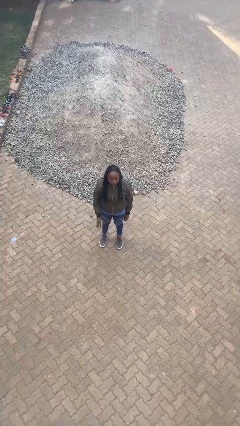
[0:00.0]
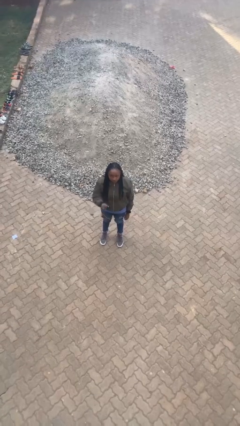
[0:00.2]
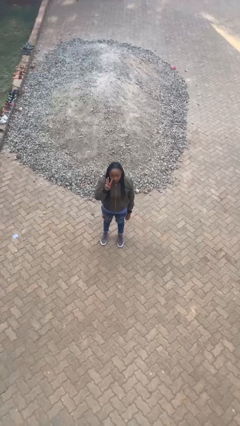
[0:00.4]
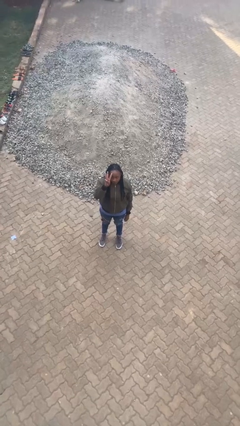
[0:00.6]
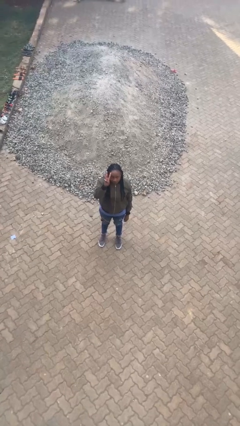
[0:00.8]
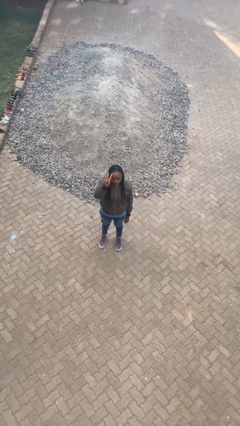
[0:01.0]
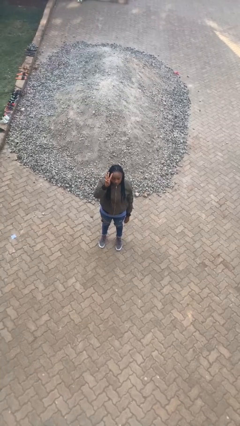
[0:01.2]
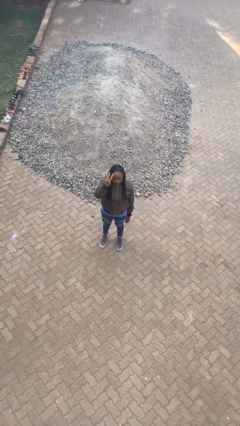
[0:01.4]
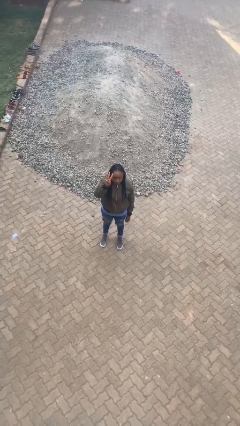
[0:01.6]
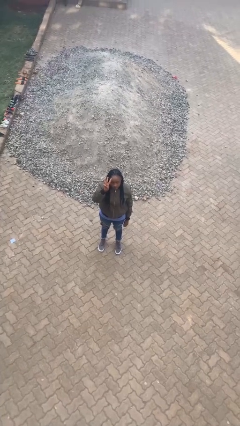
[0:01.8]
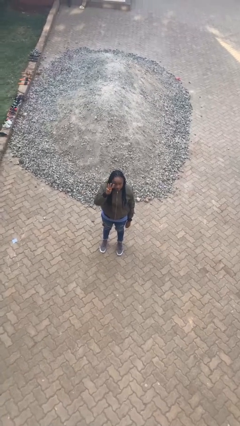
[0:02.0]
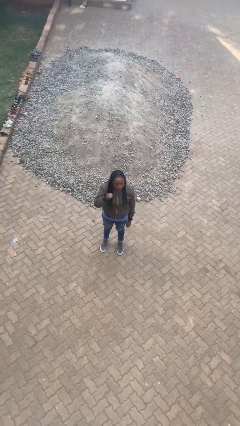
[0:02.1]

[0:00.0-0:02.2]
person gestures number three

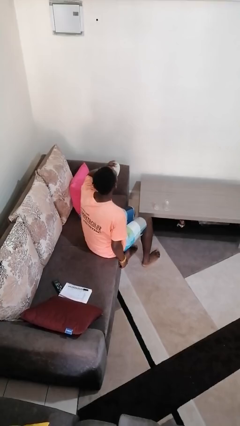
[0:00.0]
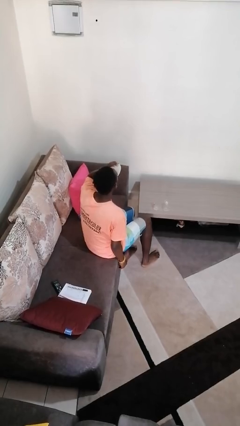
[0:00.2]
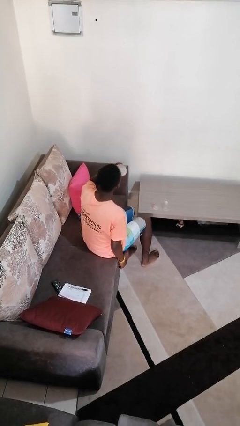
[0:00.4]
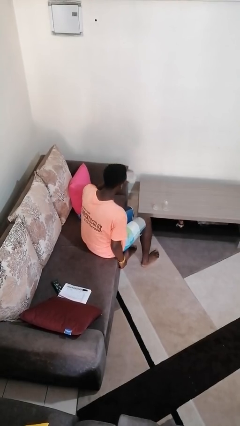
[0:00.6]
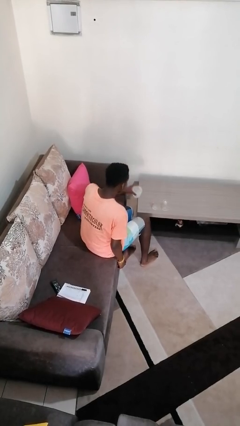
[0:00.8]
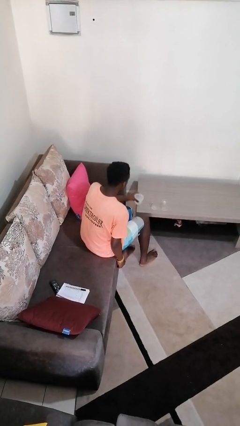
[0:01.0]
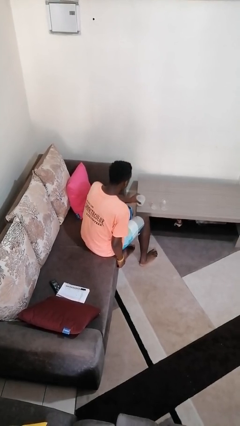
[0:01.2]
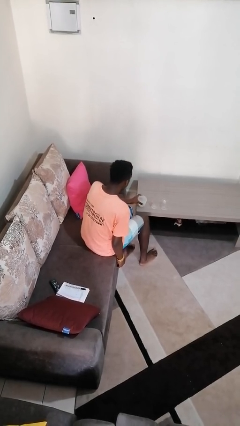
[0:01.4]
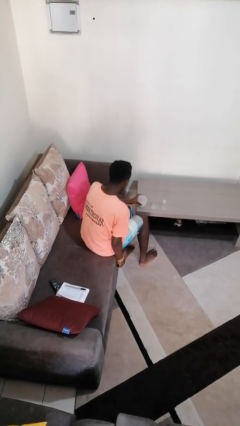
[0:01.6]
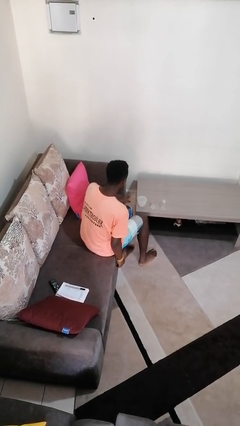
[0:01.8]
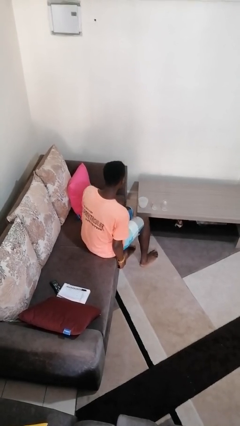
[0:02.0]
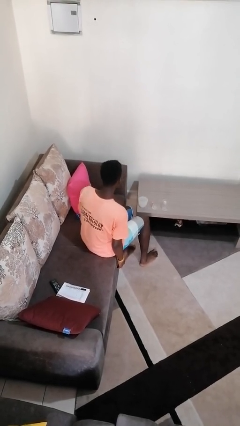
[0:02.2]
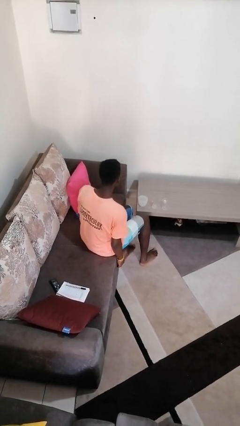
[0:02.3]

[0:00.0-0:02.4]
person puts down object on table

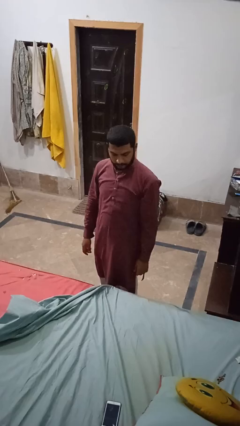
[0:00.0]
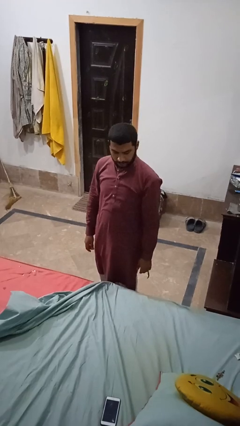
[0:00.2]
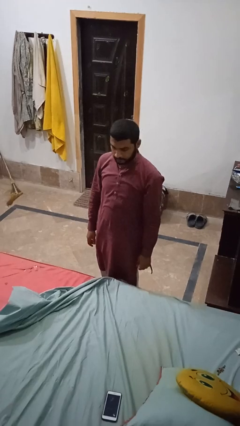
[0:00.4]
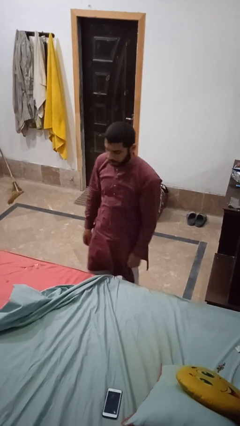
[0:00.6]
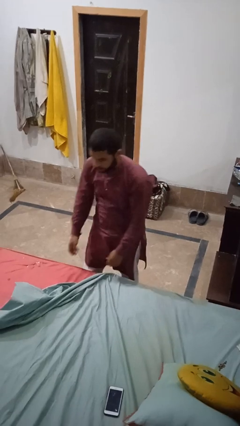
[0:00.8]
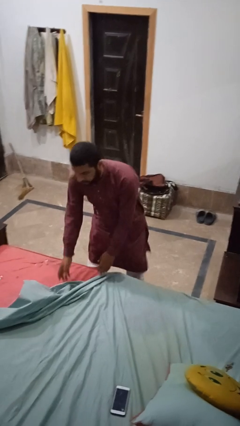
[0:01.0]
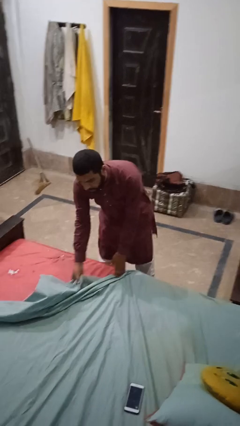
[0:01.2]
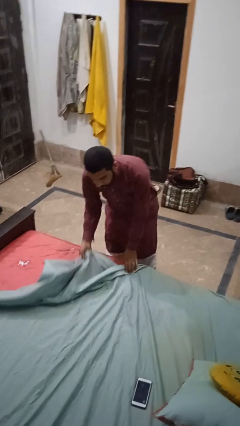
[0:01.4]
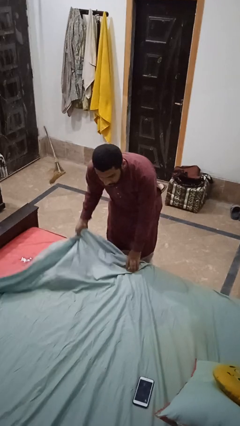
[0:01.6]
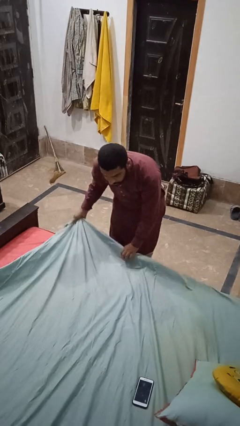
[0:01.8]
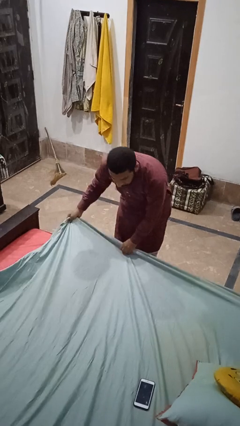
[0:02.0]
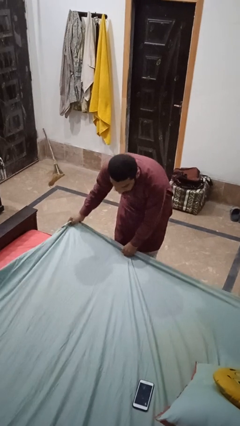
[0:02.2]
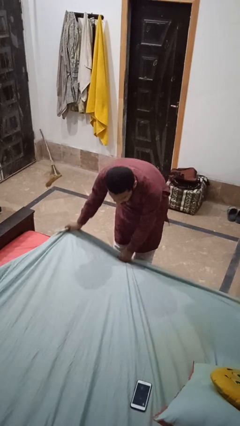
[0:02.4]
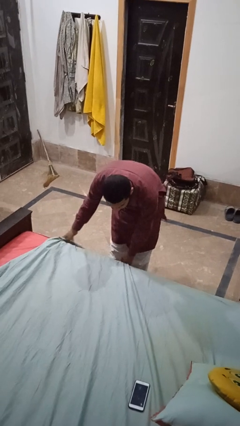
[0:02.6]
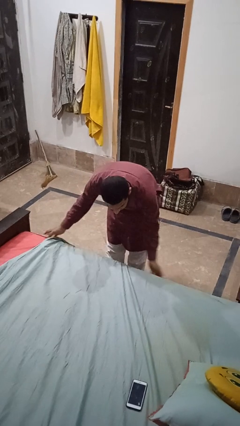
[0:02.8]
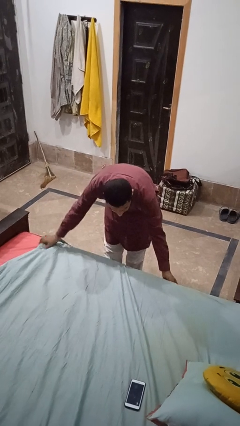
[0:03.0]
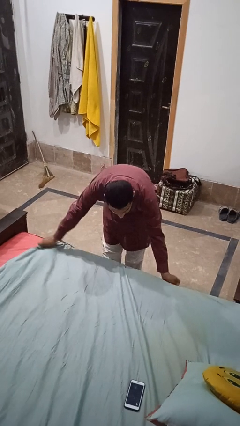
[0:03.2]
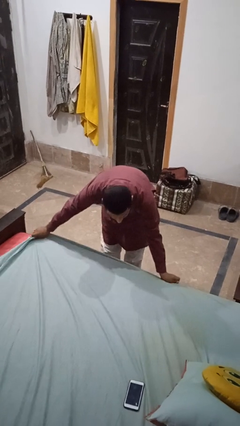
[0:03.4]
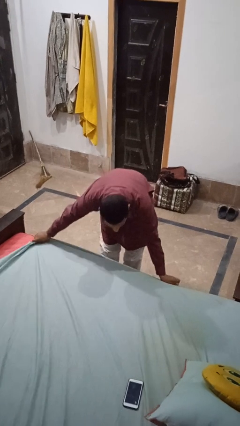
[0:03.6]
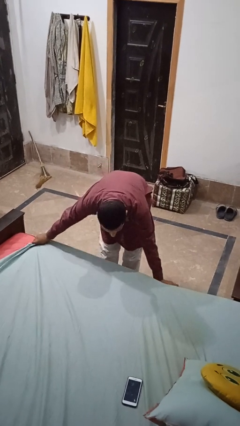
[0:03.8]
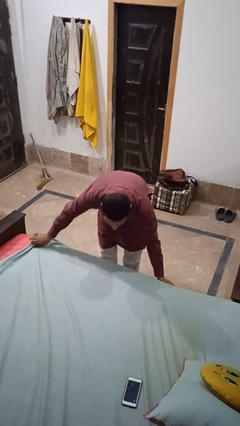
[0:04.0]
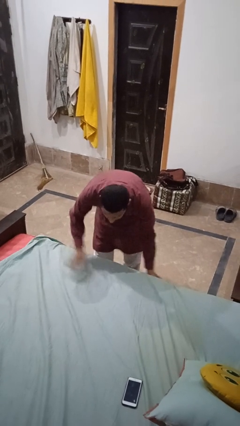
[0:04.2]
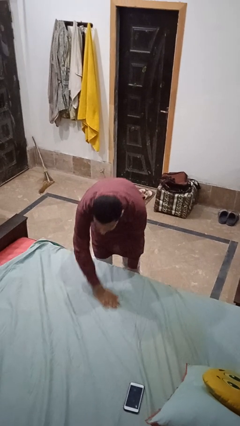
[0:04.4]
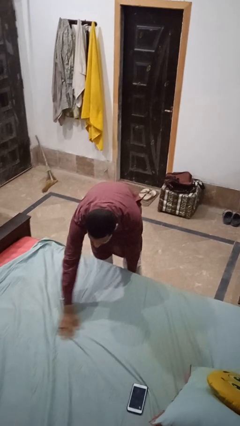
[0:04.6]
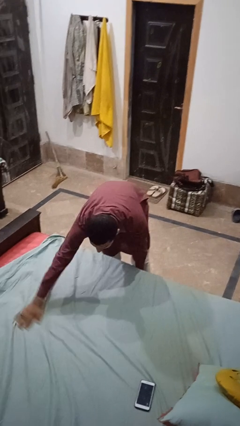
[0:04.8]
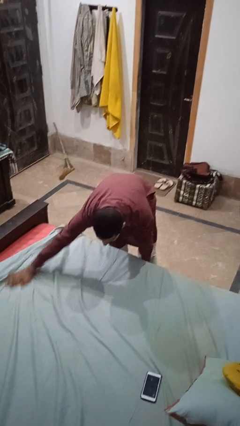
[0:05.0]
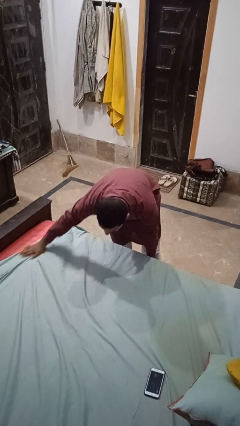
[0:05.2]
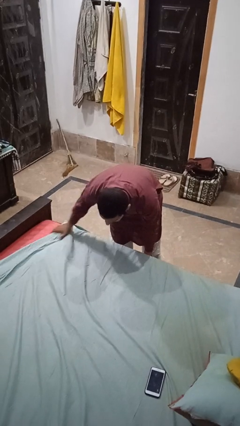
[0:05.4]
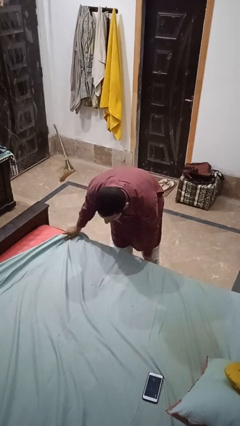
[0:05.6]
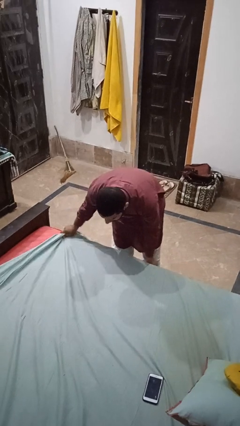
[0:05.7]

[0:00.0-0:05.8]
person makes bed

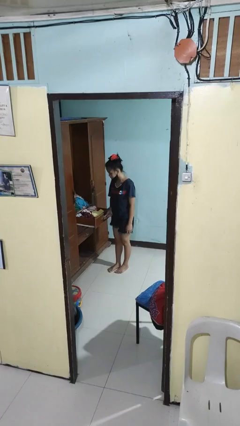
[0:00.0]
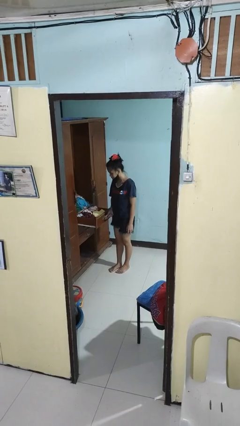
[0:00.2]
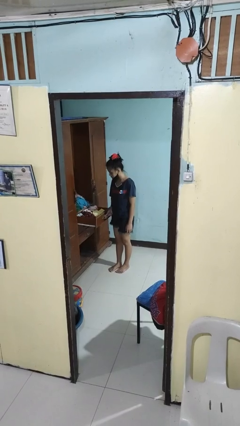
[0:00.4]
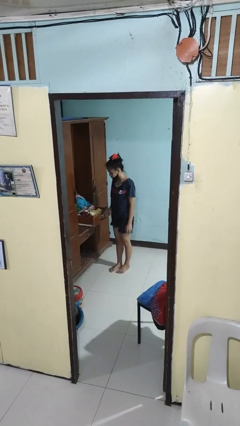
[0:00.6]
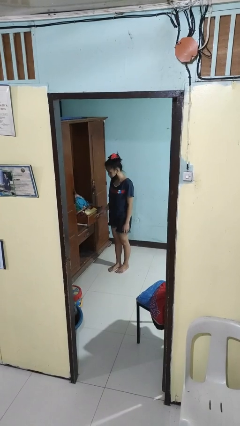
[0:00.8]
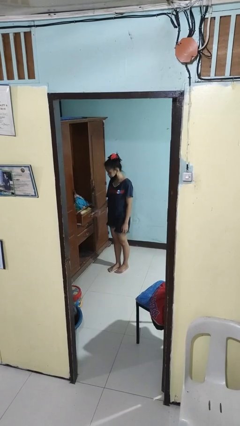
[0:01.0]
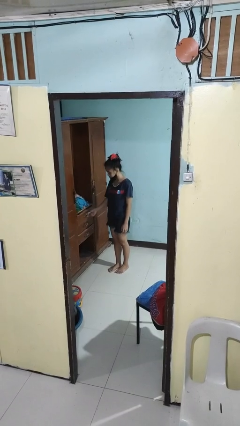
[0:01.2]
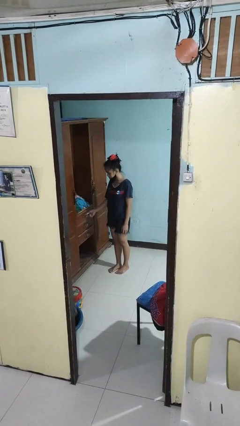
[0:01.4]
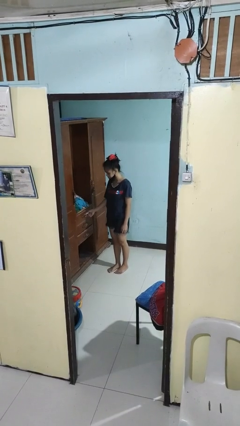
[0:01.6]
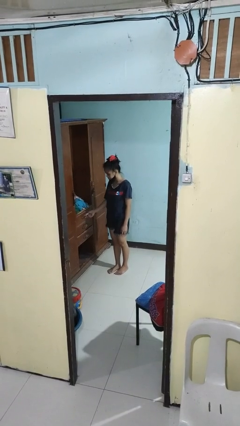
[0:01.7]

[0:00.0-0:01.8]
person closes dresser drawer

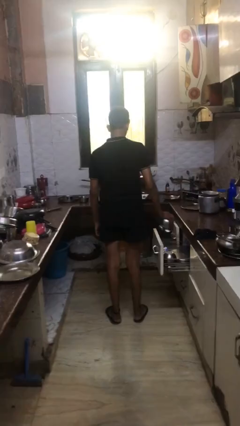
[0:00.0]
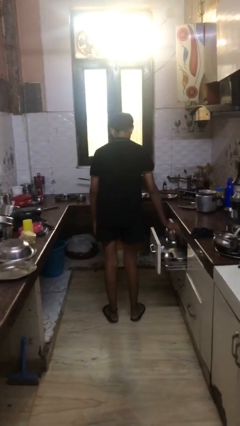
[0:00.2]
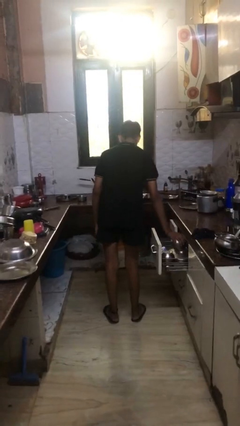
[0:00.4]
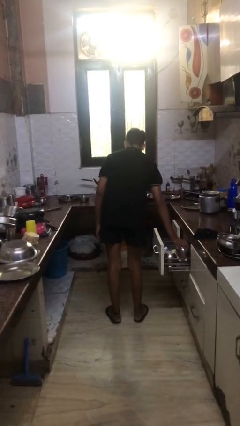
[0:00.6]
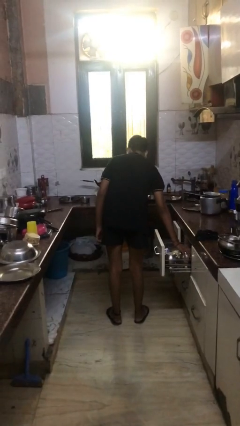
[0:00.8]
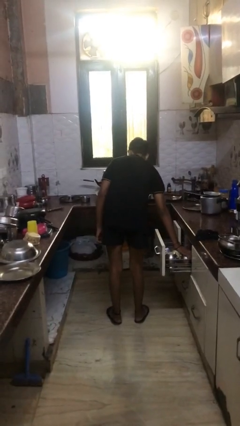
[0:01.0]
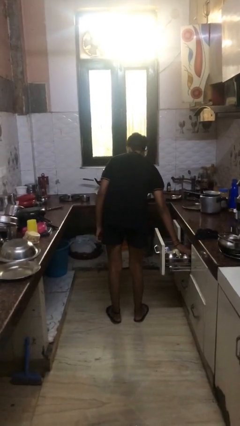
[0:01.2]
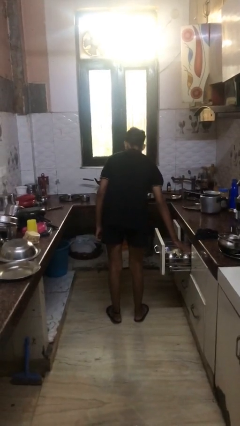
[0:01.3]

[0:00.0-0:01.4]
person puts object into kitchen drawer

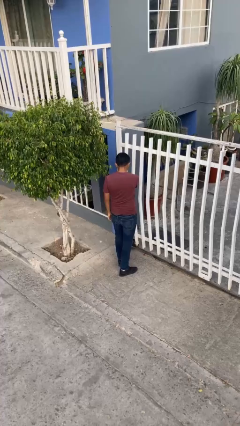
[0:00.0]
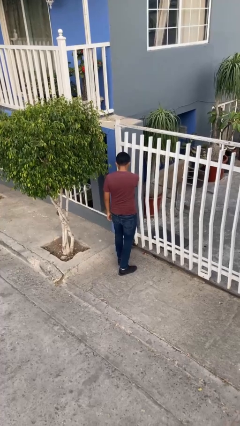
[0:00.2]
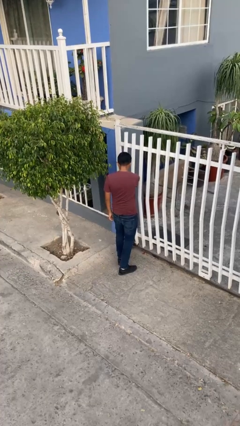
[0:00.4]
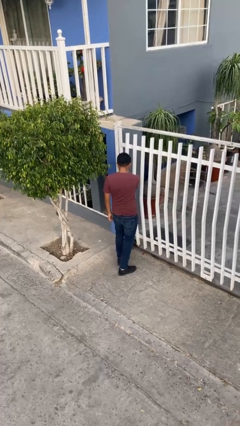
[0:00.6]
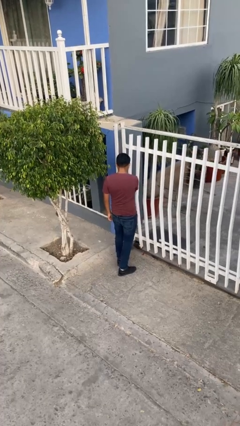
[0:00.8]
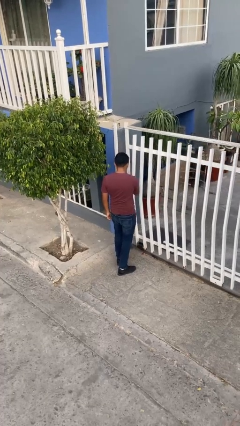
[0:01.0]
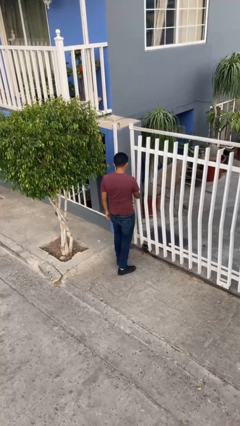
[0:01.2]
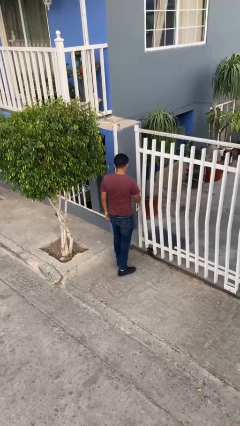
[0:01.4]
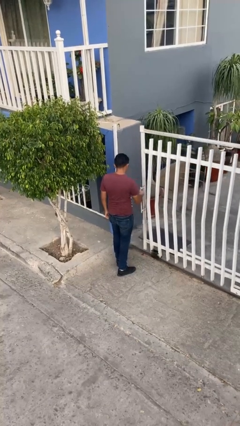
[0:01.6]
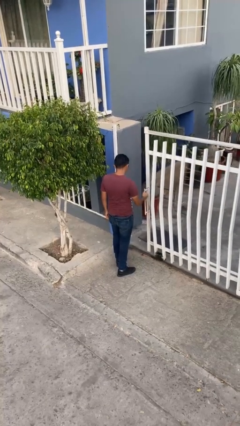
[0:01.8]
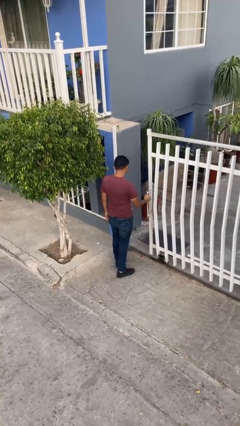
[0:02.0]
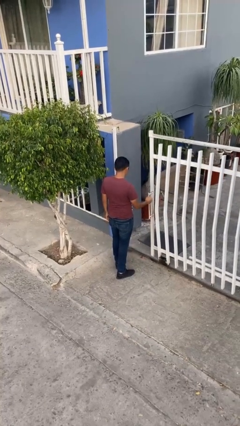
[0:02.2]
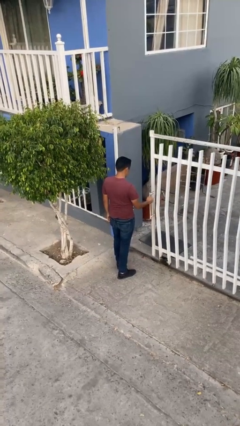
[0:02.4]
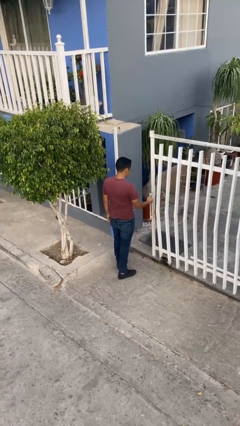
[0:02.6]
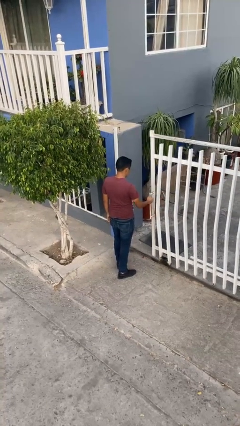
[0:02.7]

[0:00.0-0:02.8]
person opens facility door

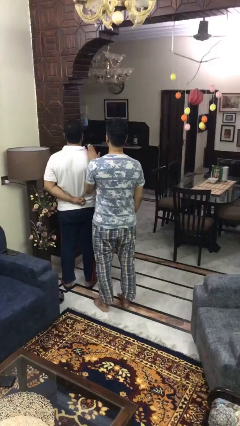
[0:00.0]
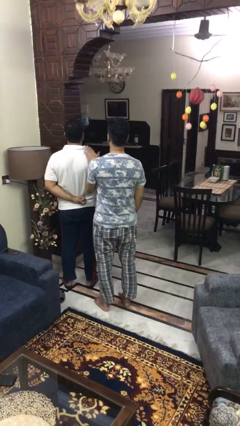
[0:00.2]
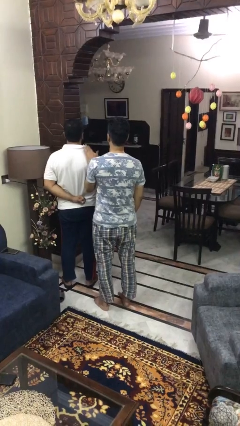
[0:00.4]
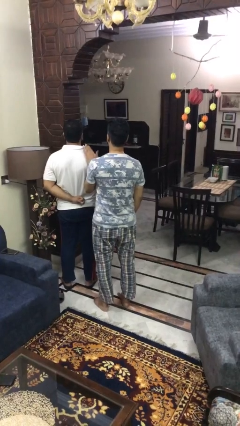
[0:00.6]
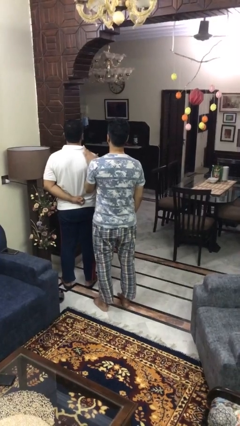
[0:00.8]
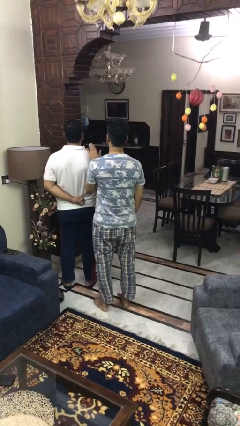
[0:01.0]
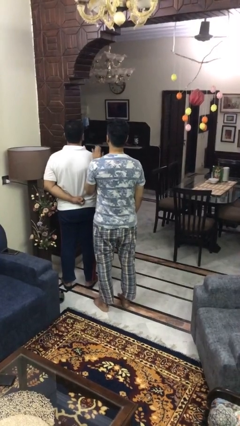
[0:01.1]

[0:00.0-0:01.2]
person touches back of person
